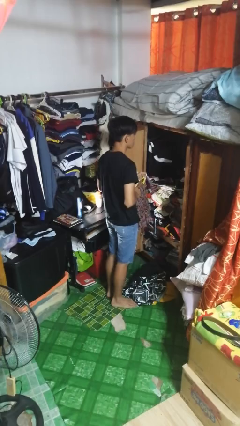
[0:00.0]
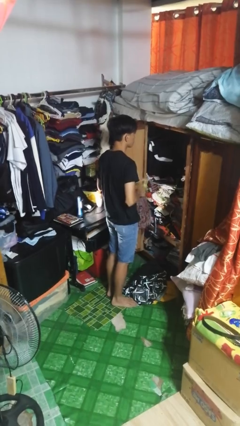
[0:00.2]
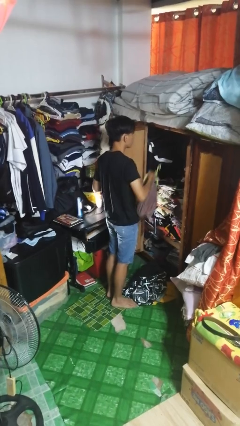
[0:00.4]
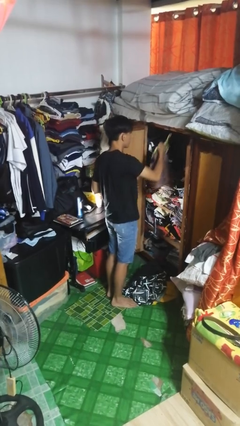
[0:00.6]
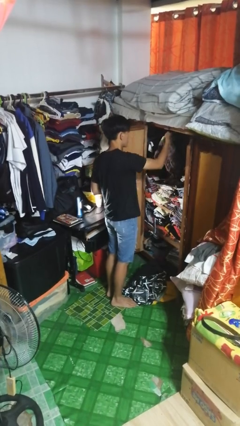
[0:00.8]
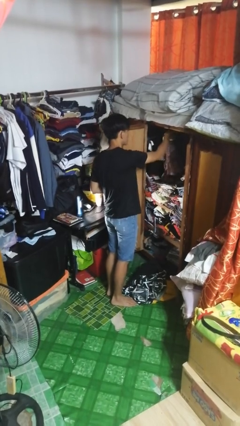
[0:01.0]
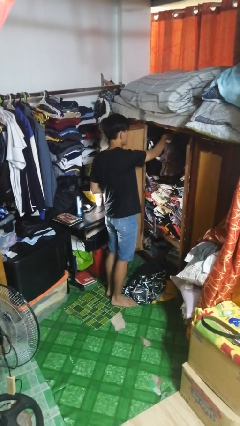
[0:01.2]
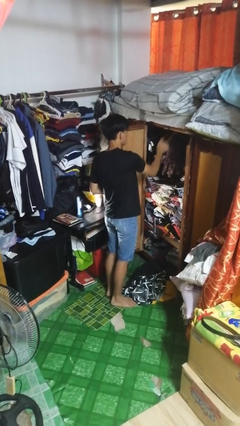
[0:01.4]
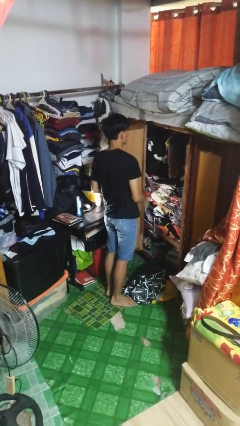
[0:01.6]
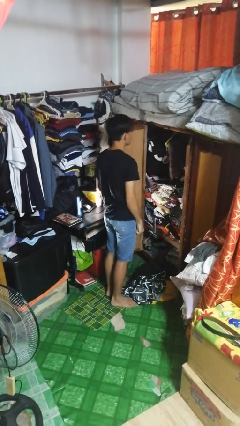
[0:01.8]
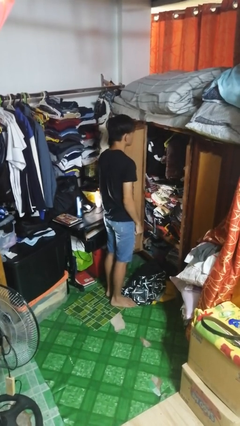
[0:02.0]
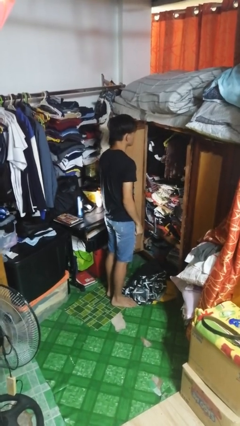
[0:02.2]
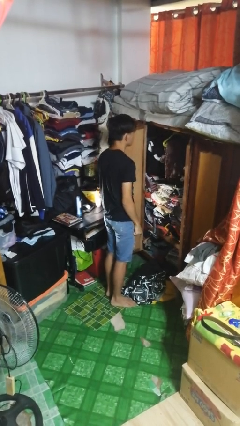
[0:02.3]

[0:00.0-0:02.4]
person puts clothes into closet

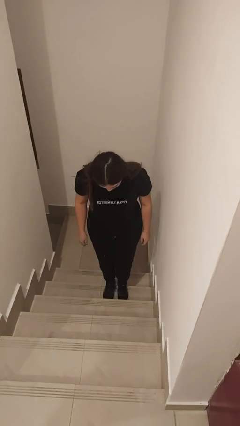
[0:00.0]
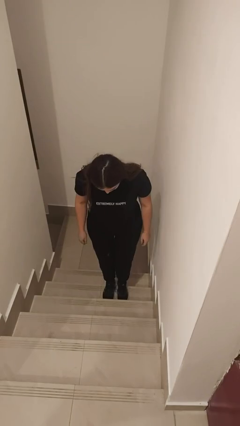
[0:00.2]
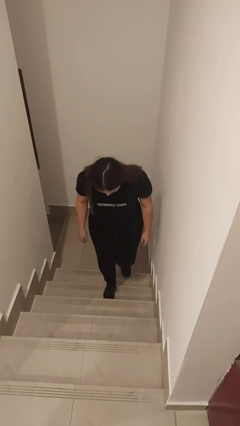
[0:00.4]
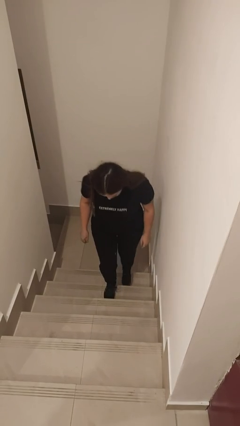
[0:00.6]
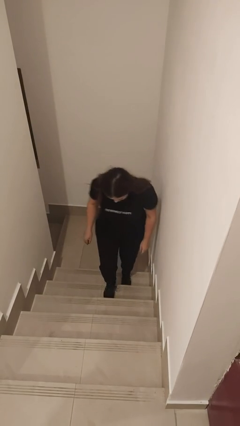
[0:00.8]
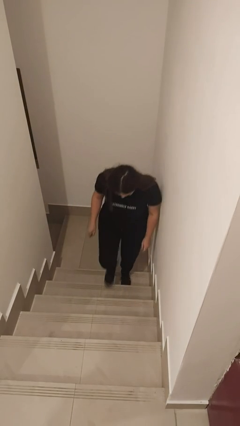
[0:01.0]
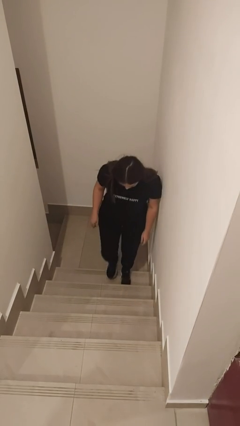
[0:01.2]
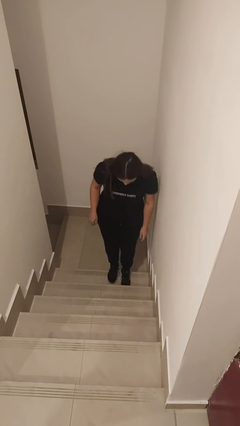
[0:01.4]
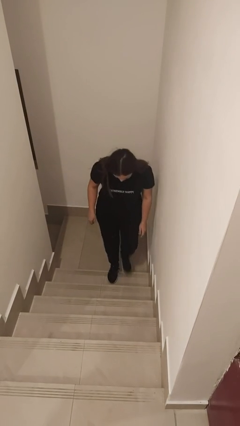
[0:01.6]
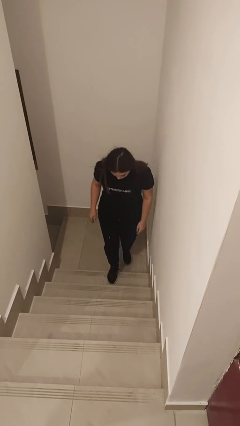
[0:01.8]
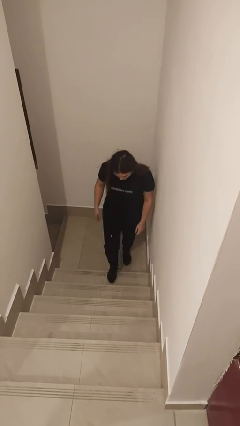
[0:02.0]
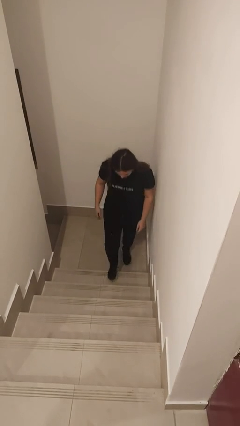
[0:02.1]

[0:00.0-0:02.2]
person climbs down stairs

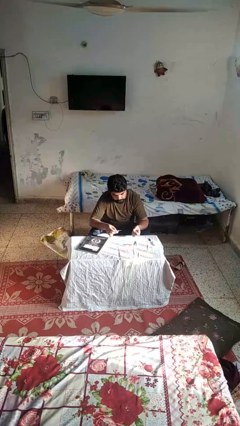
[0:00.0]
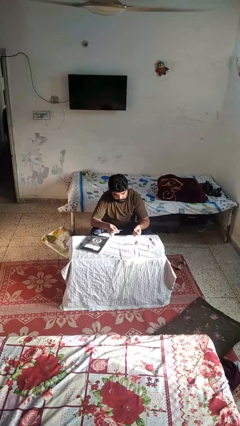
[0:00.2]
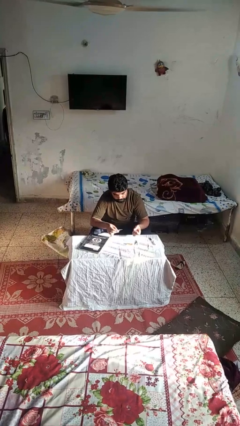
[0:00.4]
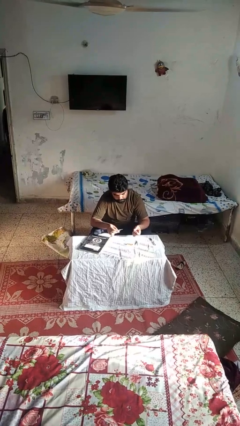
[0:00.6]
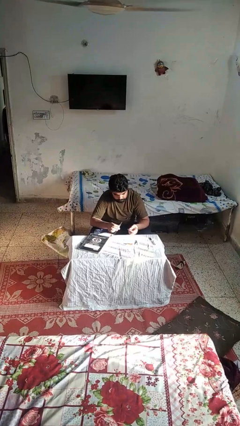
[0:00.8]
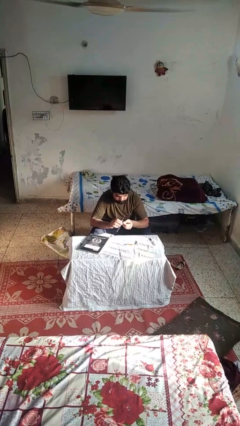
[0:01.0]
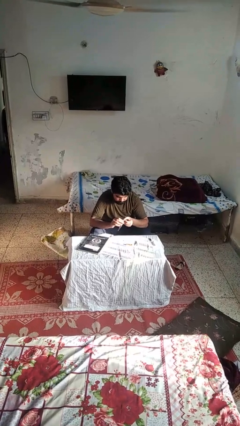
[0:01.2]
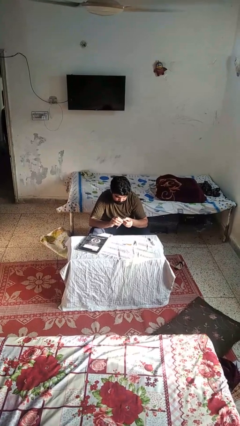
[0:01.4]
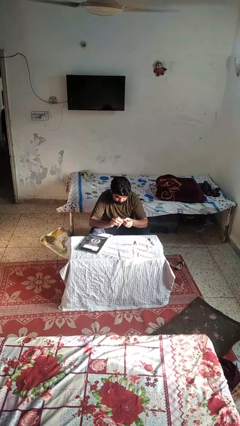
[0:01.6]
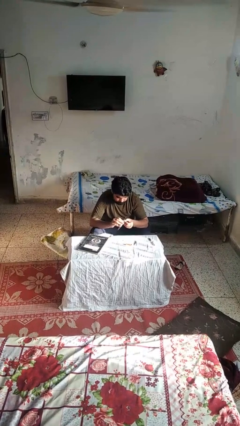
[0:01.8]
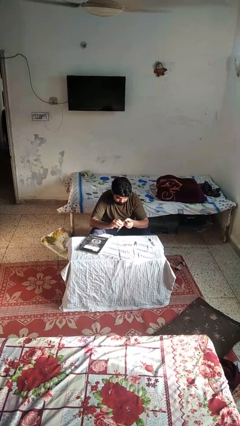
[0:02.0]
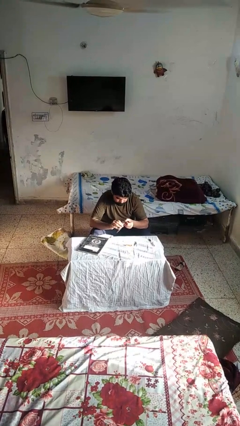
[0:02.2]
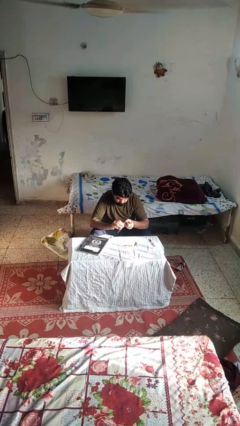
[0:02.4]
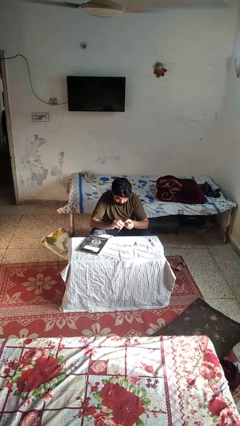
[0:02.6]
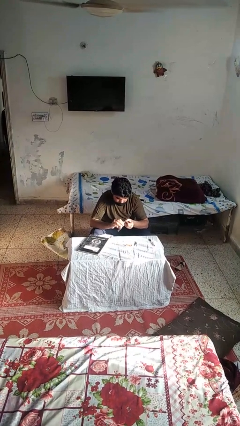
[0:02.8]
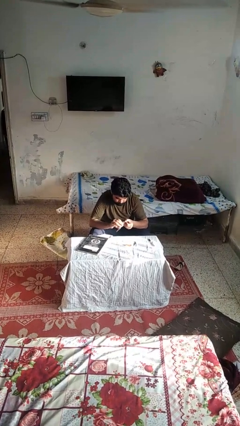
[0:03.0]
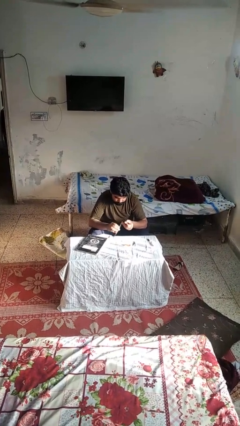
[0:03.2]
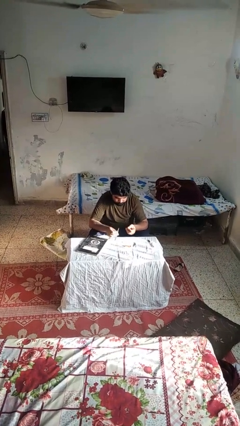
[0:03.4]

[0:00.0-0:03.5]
person files fingernails

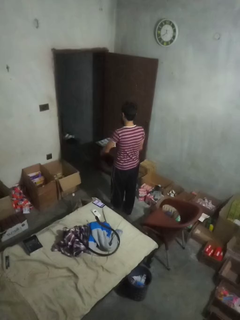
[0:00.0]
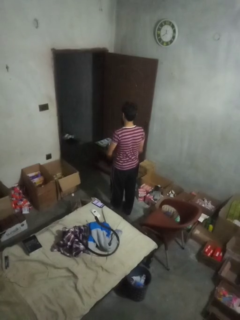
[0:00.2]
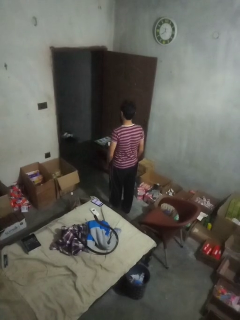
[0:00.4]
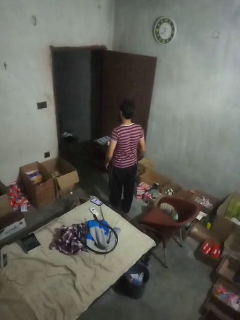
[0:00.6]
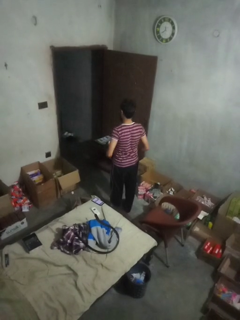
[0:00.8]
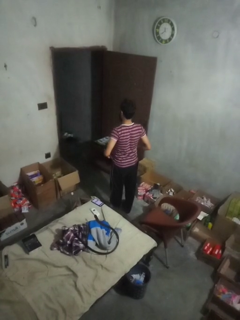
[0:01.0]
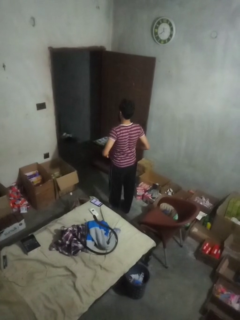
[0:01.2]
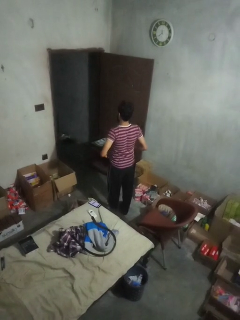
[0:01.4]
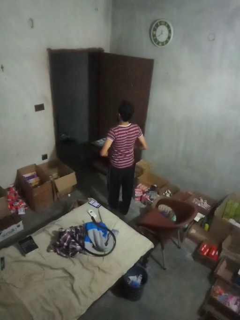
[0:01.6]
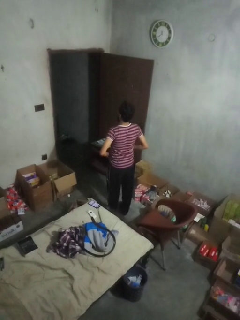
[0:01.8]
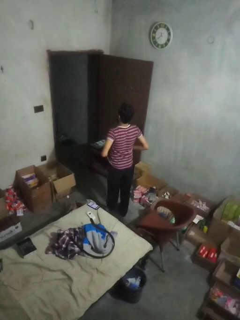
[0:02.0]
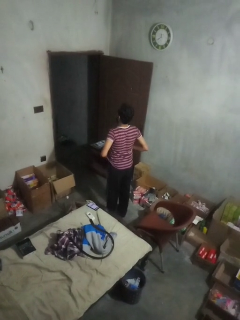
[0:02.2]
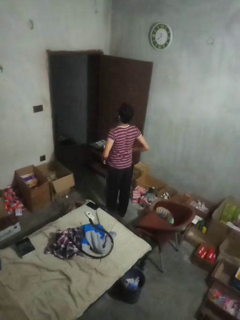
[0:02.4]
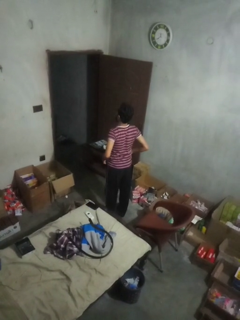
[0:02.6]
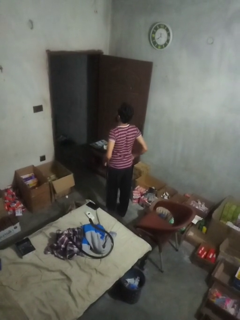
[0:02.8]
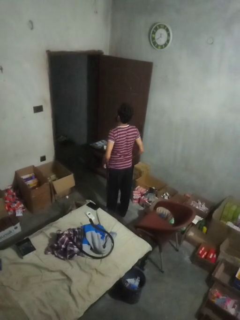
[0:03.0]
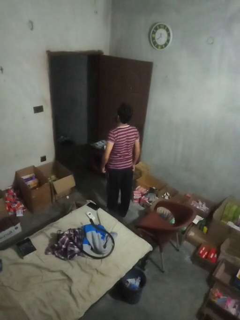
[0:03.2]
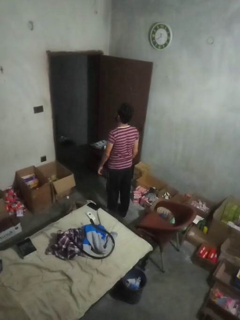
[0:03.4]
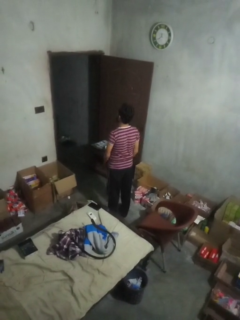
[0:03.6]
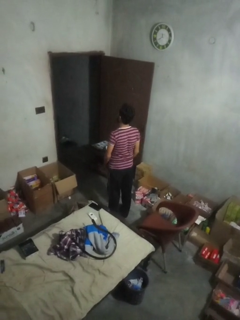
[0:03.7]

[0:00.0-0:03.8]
person hikes up pants

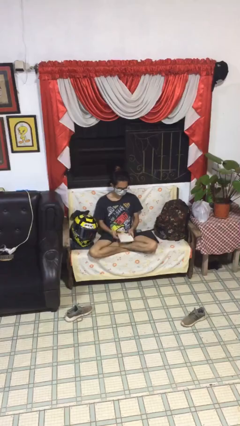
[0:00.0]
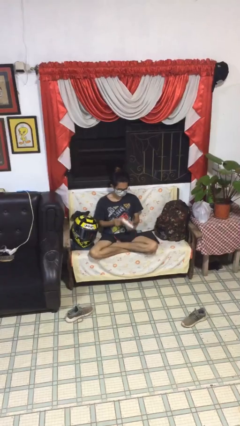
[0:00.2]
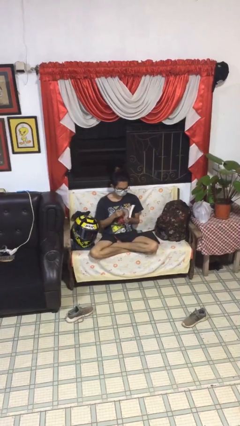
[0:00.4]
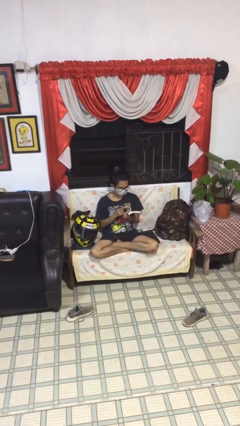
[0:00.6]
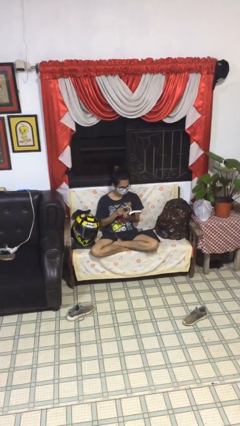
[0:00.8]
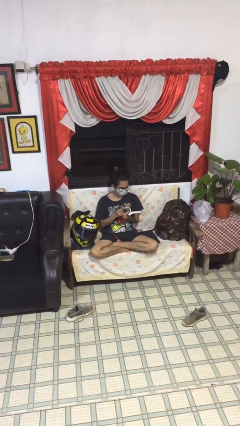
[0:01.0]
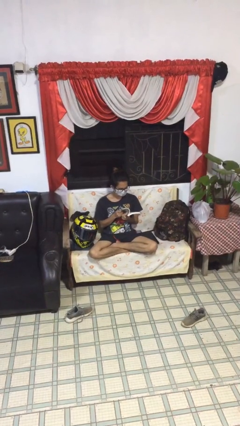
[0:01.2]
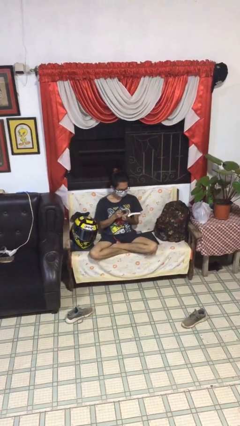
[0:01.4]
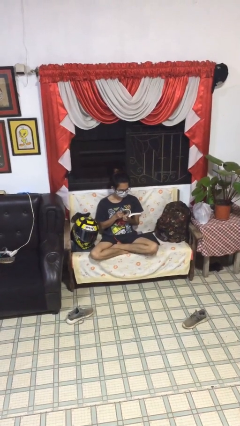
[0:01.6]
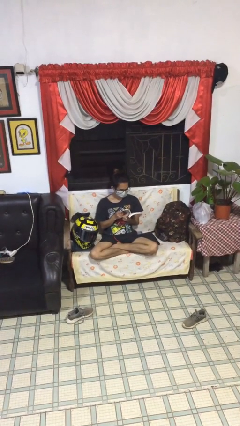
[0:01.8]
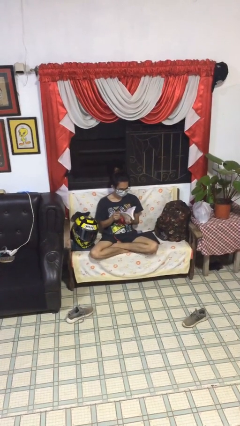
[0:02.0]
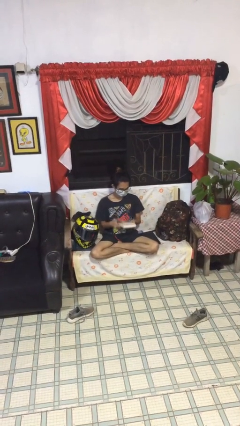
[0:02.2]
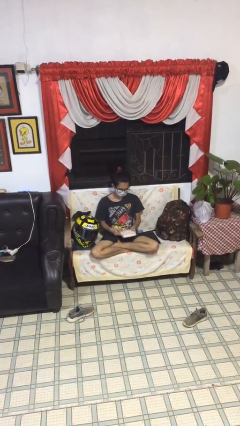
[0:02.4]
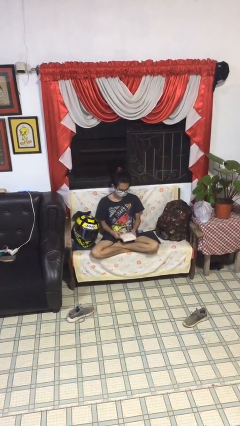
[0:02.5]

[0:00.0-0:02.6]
person reads document

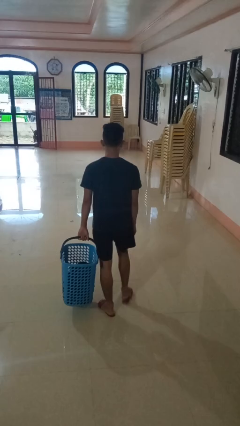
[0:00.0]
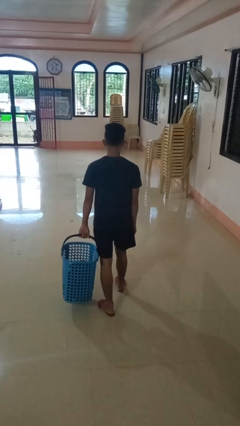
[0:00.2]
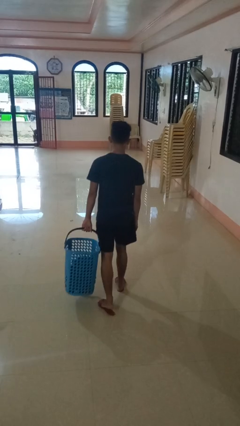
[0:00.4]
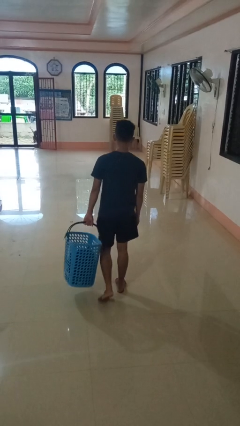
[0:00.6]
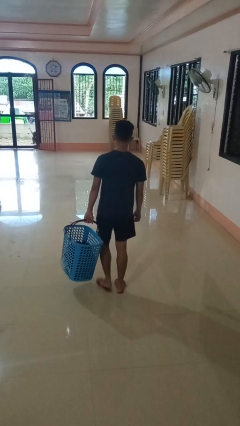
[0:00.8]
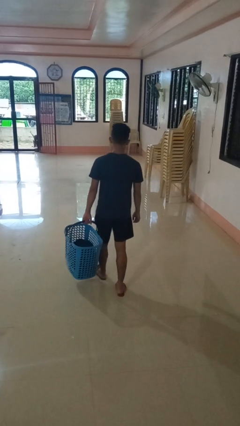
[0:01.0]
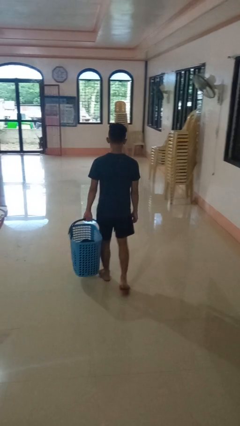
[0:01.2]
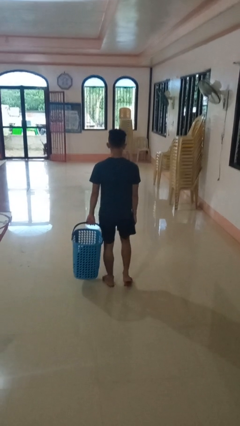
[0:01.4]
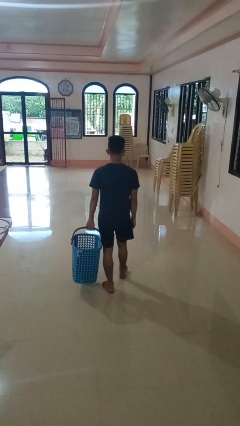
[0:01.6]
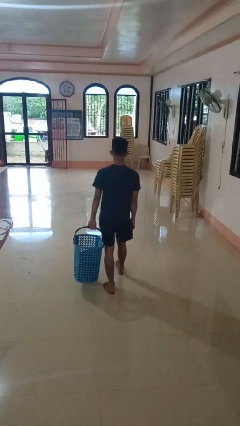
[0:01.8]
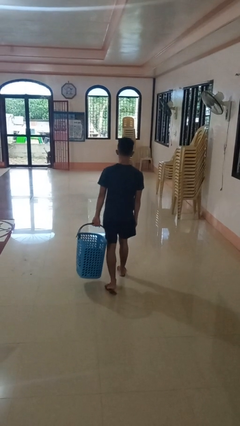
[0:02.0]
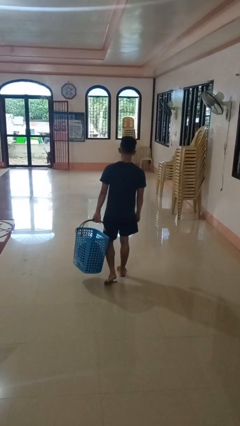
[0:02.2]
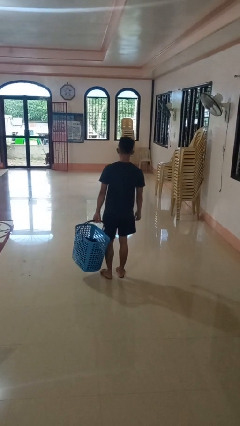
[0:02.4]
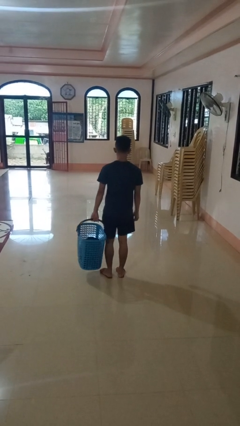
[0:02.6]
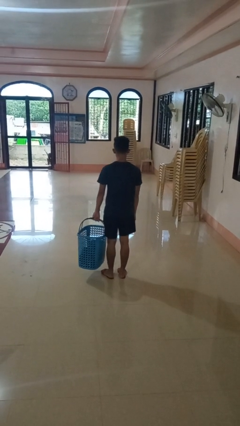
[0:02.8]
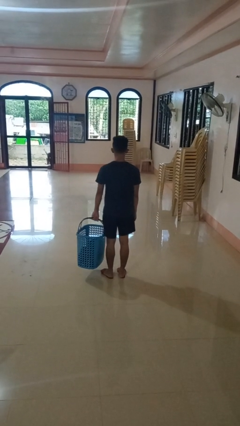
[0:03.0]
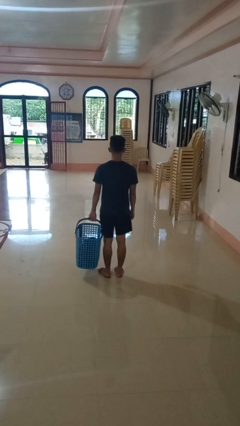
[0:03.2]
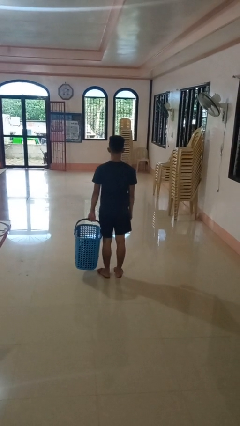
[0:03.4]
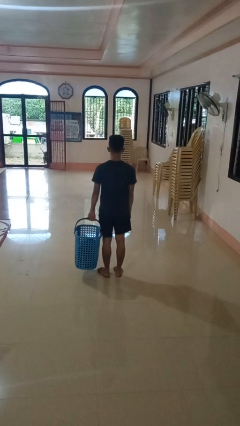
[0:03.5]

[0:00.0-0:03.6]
person carries laundry basket
